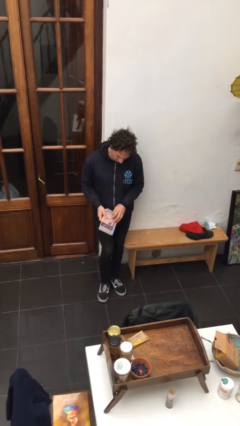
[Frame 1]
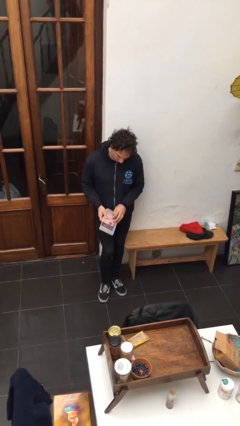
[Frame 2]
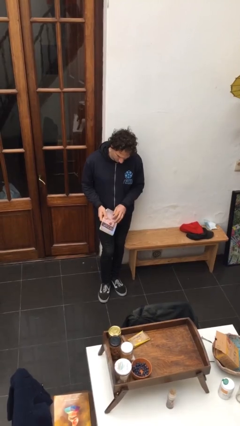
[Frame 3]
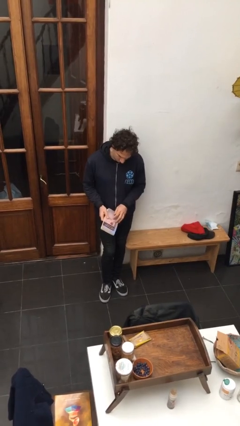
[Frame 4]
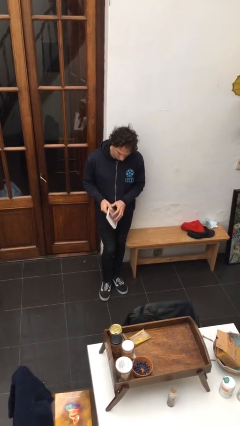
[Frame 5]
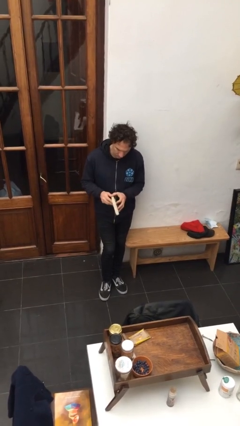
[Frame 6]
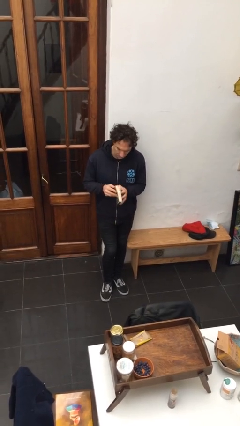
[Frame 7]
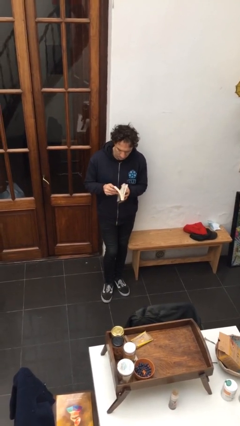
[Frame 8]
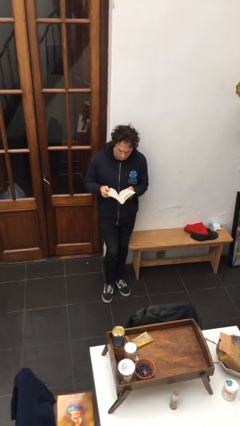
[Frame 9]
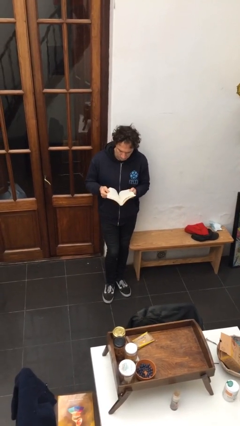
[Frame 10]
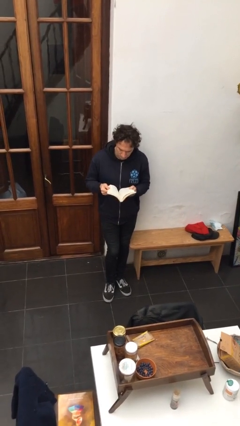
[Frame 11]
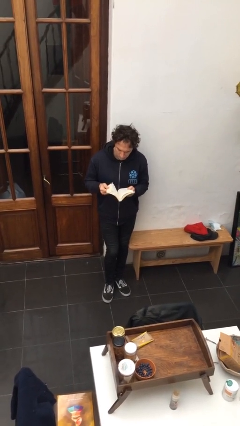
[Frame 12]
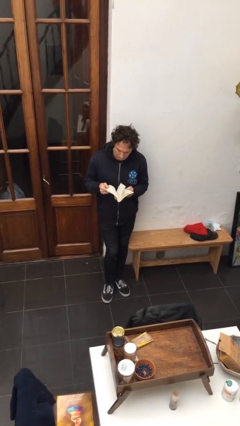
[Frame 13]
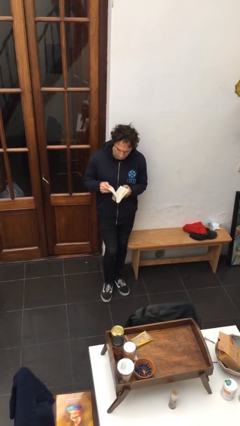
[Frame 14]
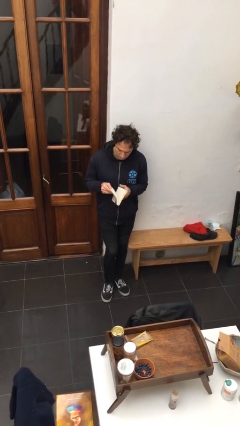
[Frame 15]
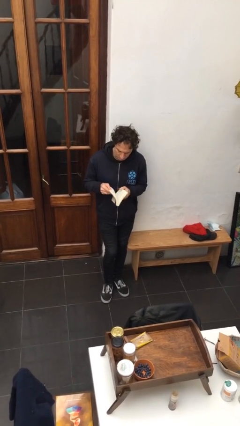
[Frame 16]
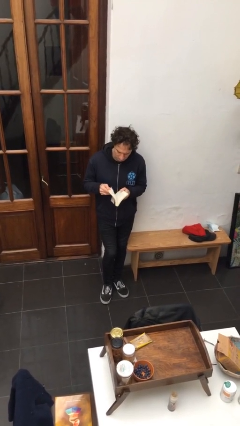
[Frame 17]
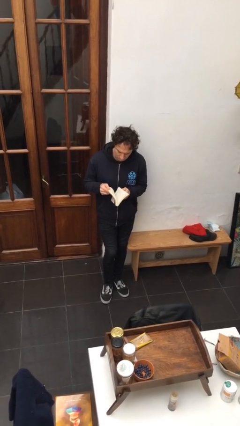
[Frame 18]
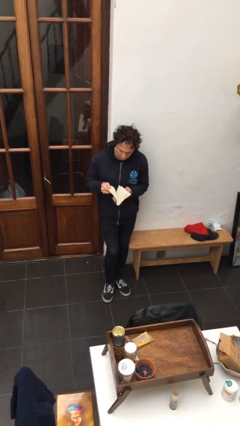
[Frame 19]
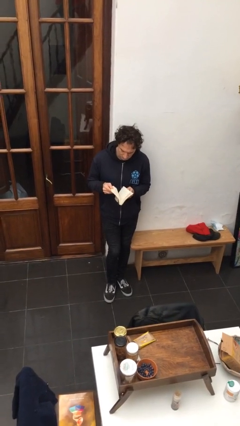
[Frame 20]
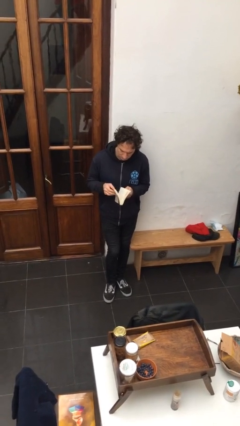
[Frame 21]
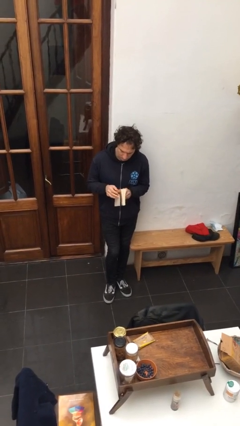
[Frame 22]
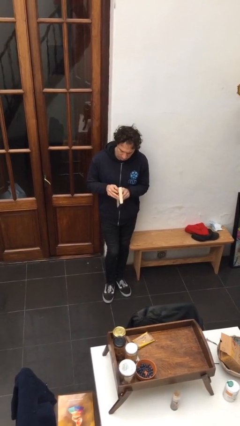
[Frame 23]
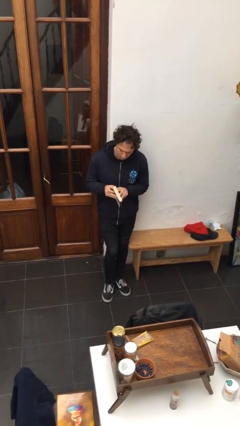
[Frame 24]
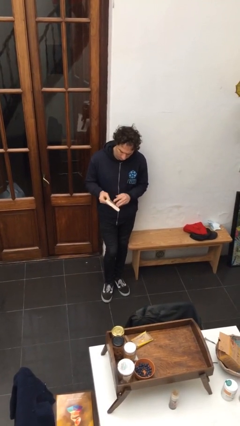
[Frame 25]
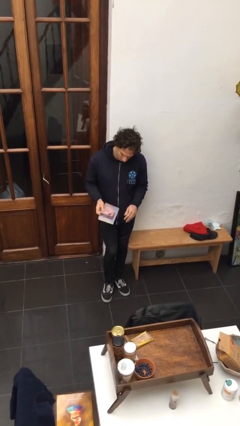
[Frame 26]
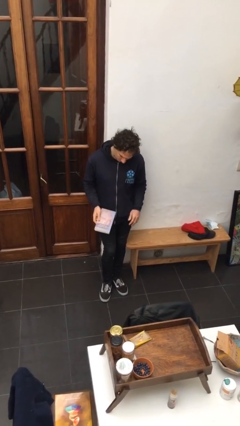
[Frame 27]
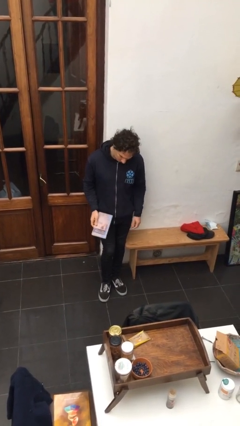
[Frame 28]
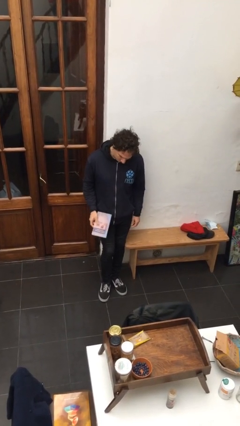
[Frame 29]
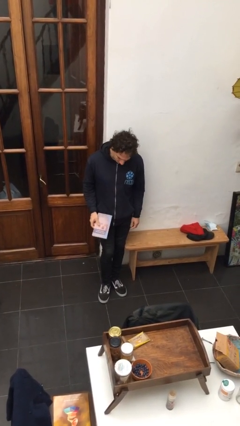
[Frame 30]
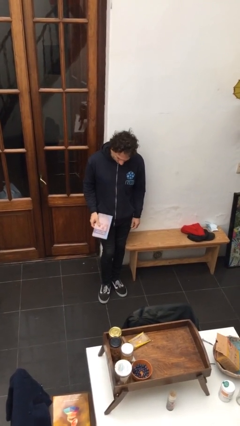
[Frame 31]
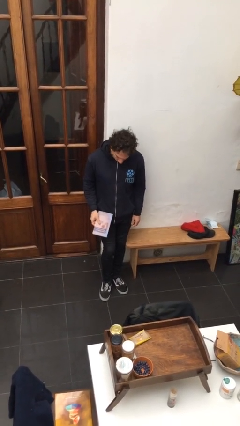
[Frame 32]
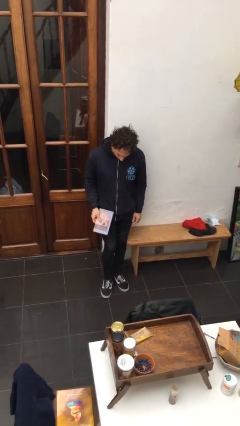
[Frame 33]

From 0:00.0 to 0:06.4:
person reads book

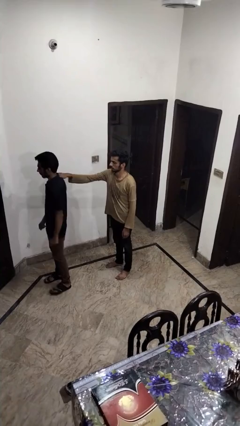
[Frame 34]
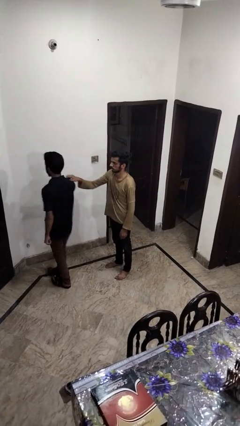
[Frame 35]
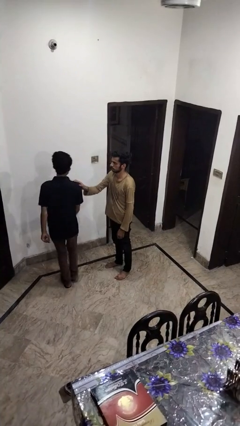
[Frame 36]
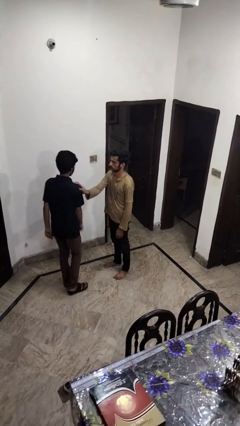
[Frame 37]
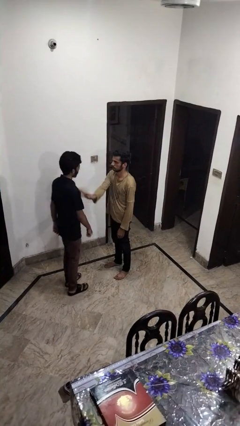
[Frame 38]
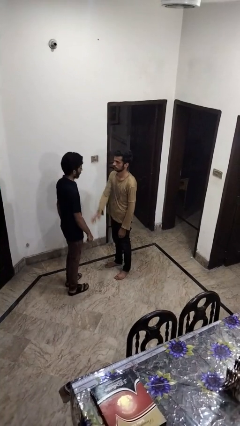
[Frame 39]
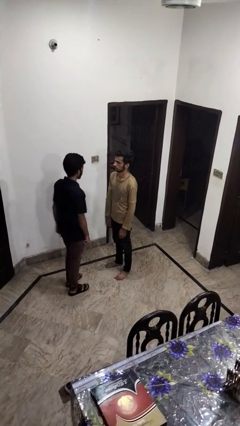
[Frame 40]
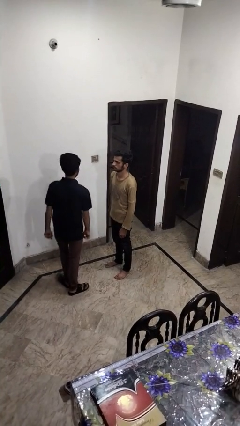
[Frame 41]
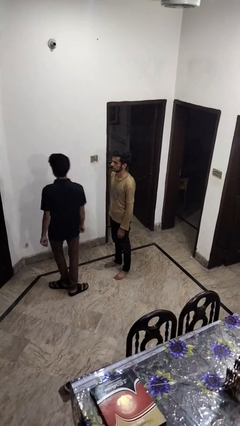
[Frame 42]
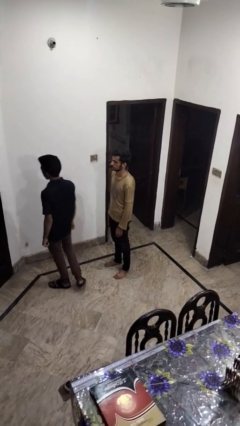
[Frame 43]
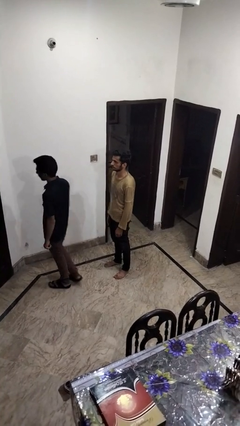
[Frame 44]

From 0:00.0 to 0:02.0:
person spins person around

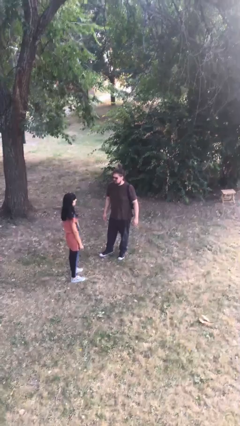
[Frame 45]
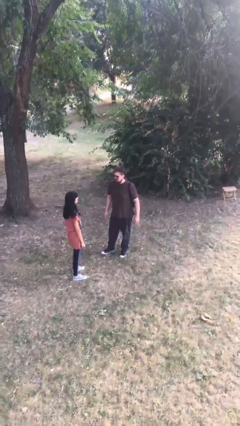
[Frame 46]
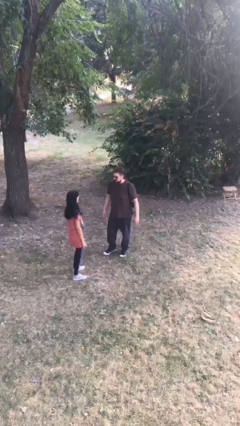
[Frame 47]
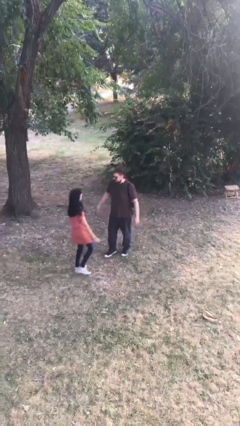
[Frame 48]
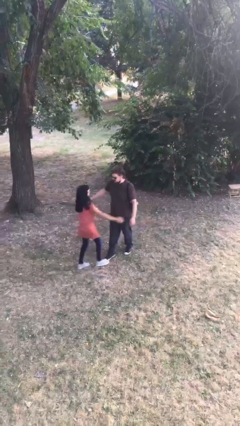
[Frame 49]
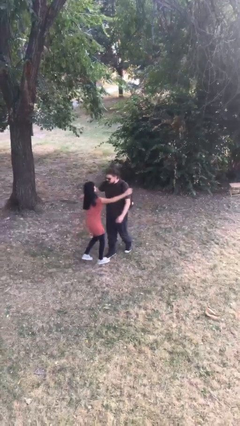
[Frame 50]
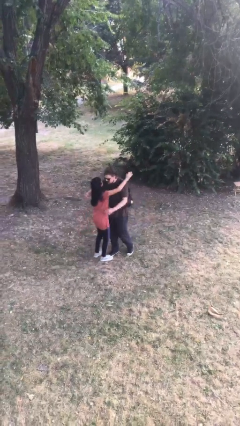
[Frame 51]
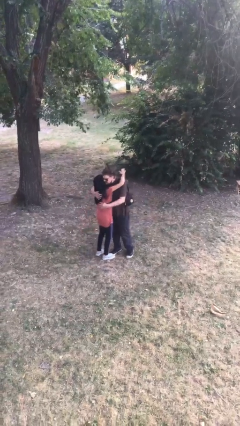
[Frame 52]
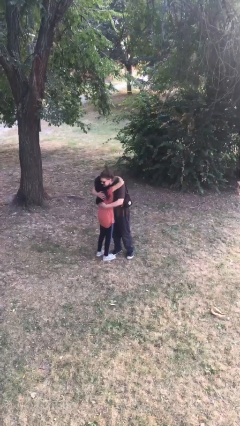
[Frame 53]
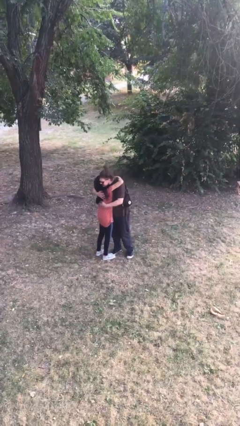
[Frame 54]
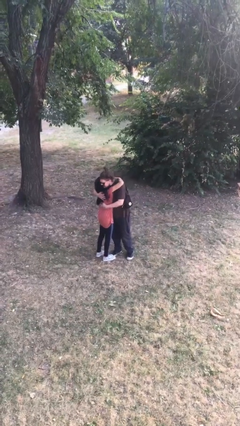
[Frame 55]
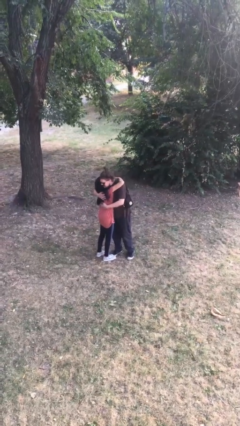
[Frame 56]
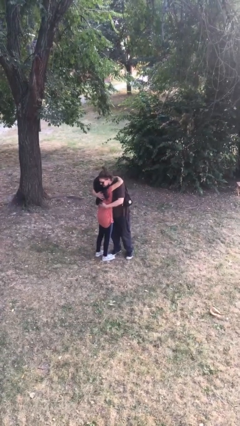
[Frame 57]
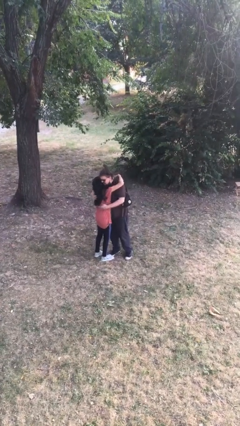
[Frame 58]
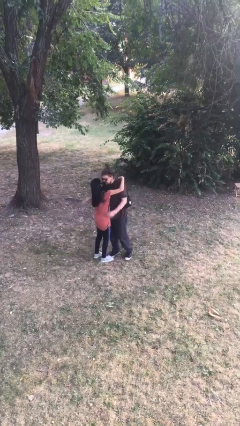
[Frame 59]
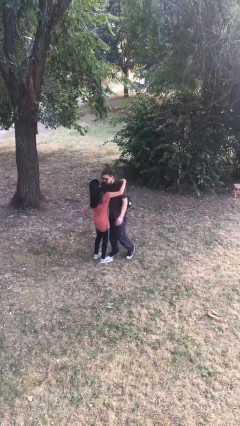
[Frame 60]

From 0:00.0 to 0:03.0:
person embraces person

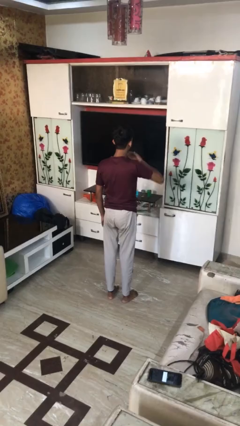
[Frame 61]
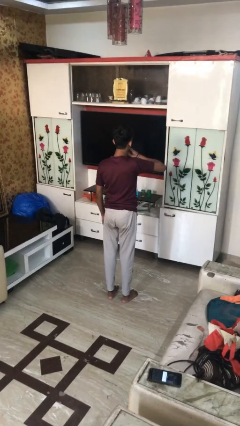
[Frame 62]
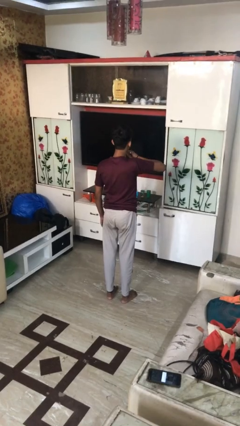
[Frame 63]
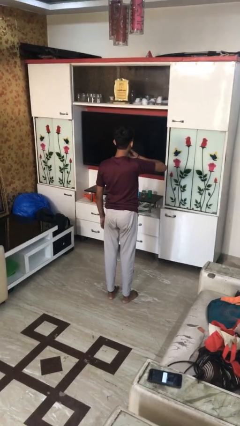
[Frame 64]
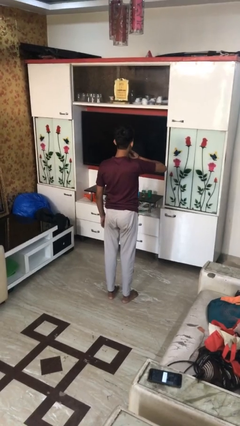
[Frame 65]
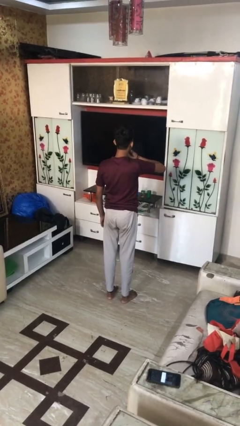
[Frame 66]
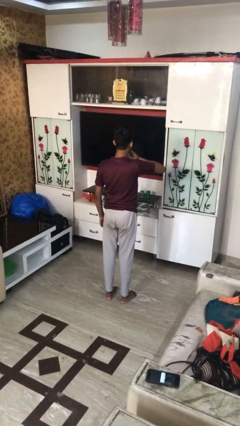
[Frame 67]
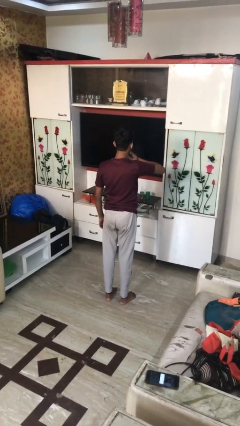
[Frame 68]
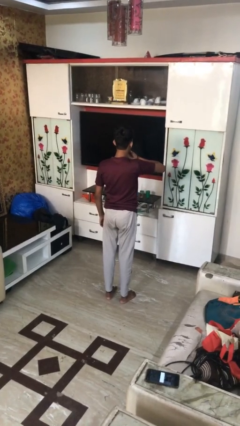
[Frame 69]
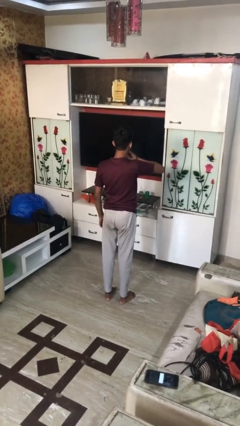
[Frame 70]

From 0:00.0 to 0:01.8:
person strokes chin

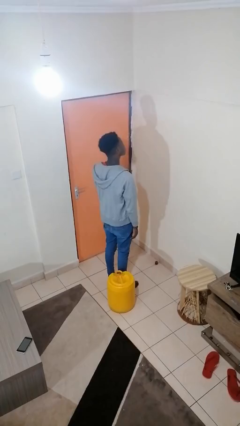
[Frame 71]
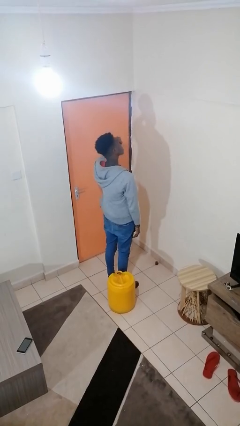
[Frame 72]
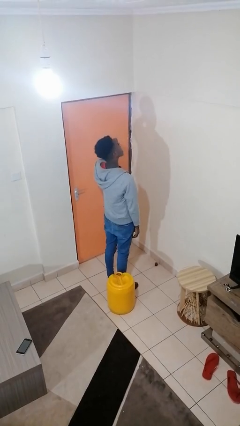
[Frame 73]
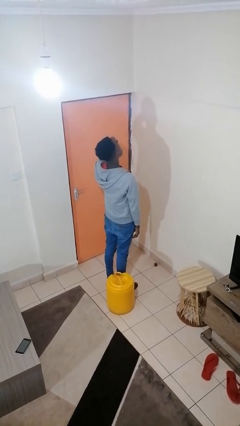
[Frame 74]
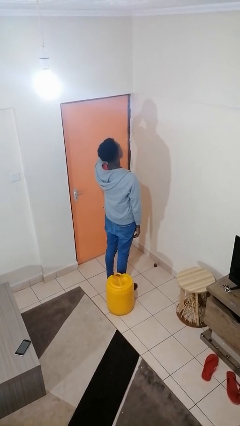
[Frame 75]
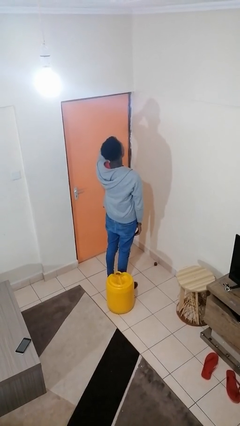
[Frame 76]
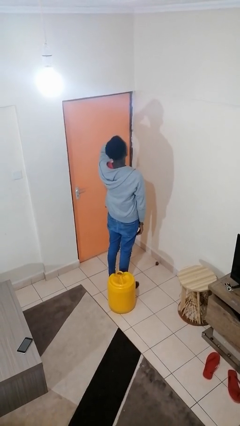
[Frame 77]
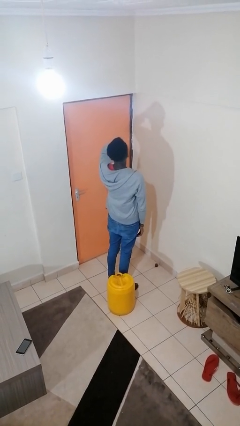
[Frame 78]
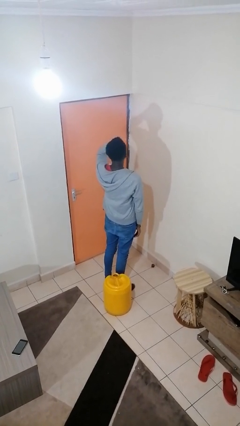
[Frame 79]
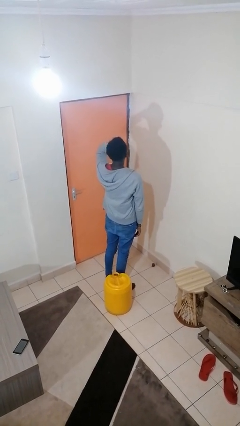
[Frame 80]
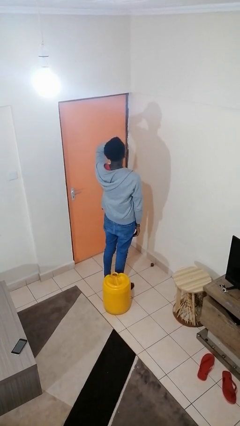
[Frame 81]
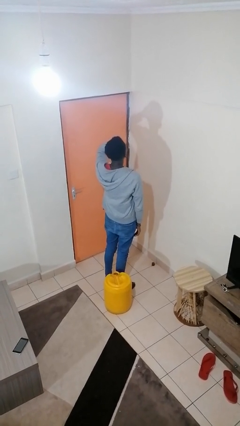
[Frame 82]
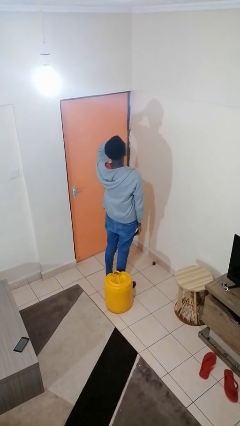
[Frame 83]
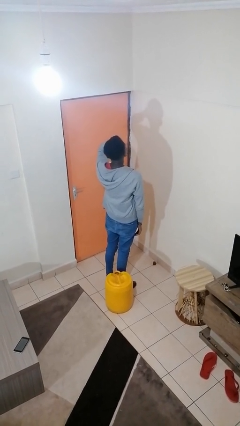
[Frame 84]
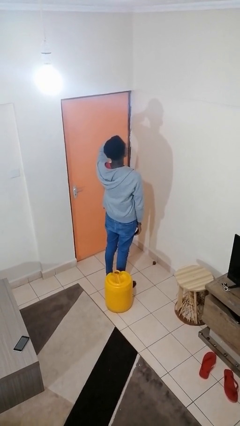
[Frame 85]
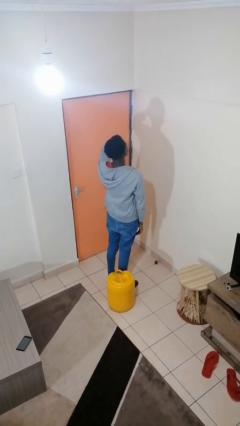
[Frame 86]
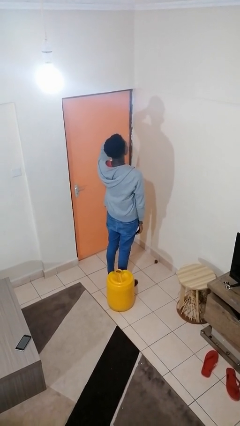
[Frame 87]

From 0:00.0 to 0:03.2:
person rubs eyes

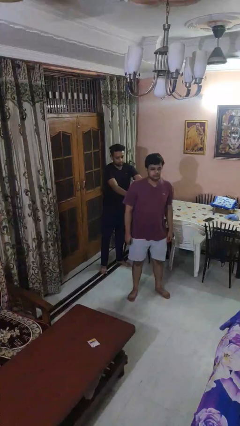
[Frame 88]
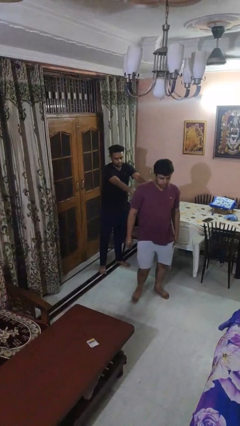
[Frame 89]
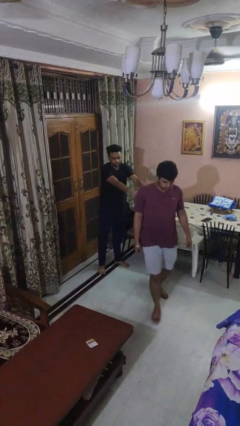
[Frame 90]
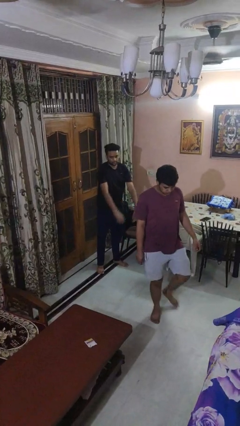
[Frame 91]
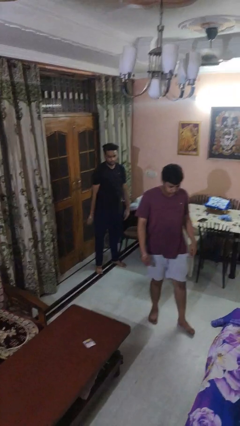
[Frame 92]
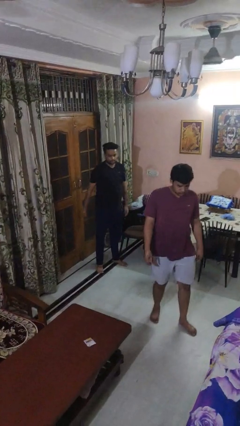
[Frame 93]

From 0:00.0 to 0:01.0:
person shoves person
